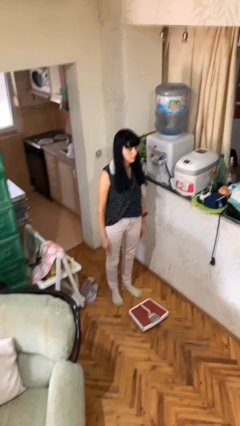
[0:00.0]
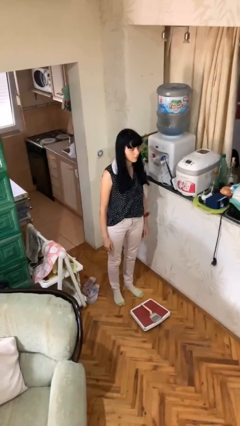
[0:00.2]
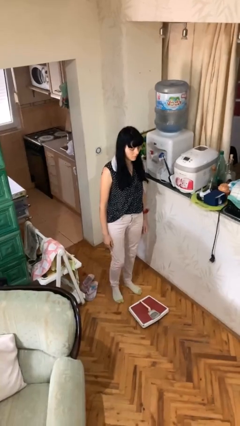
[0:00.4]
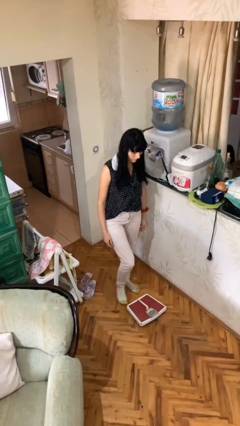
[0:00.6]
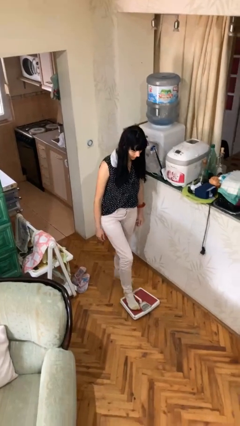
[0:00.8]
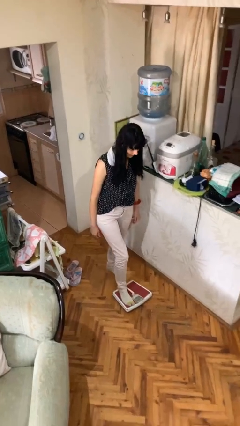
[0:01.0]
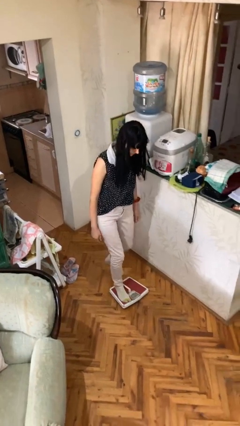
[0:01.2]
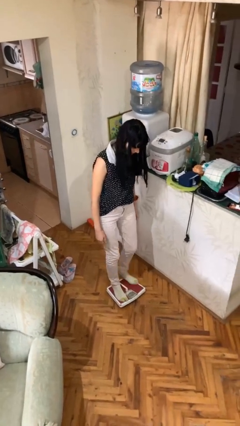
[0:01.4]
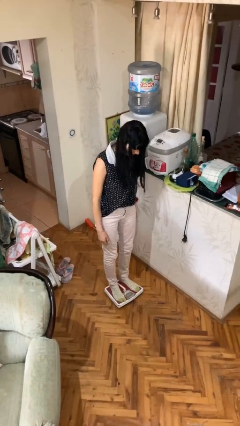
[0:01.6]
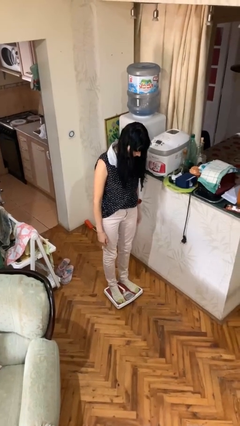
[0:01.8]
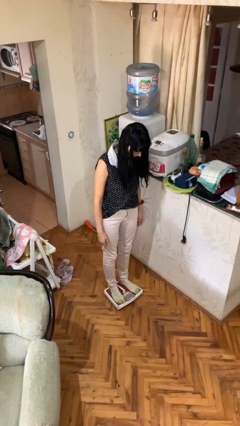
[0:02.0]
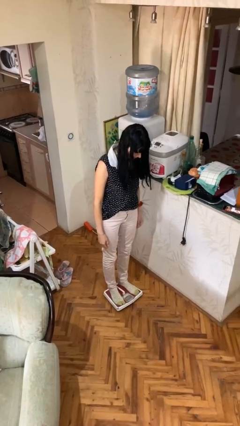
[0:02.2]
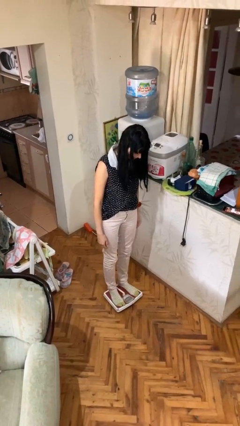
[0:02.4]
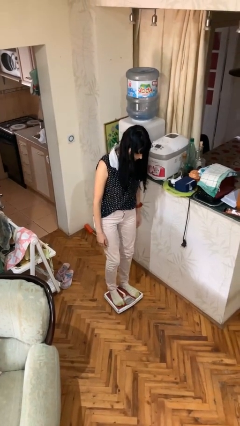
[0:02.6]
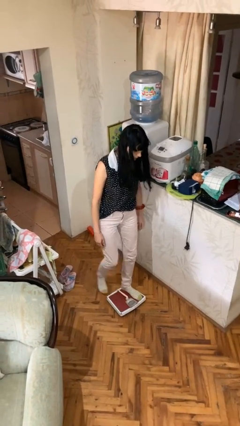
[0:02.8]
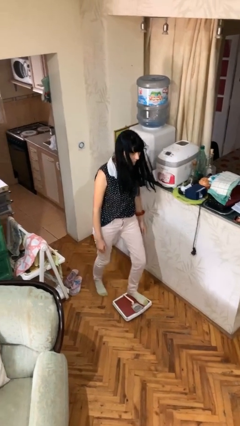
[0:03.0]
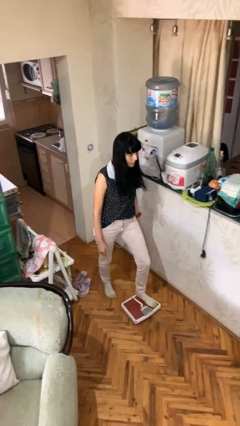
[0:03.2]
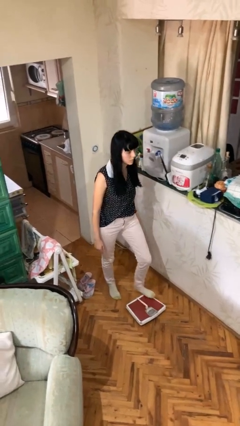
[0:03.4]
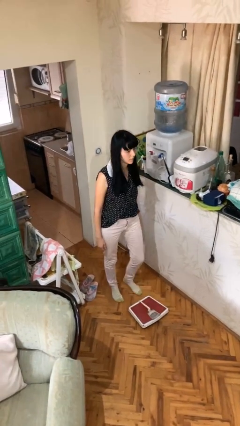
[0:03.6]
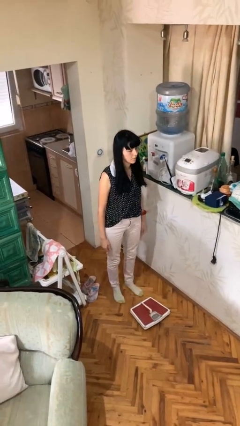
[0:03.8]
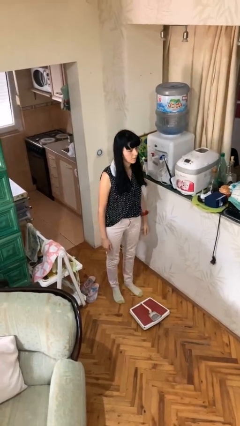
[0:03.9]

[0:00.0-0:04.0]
person uses bodyweight scale

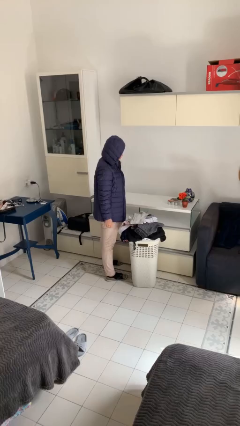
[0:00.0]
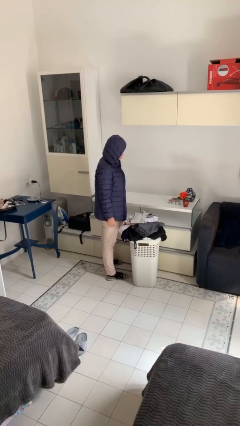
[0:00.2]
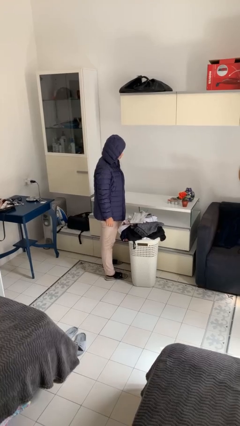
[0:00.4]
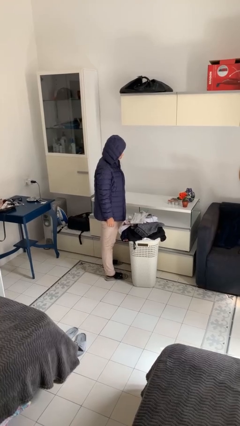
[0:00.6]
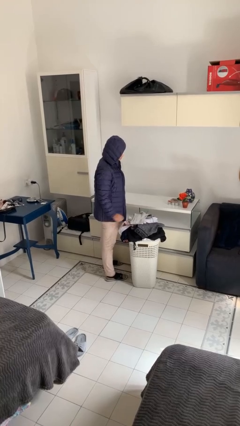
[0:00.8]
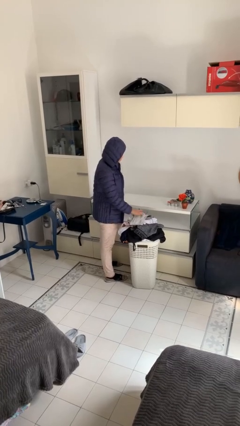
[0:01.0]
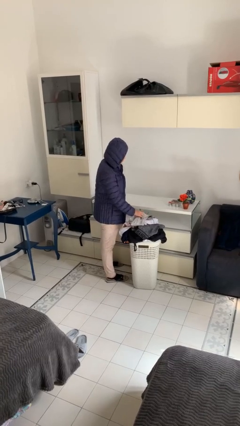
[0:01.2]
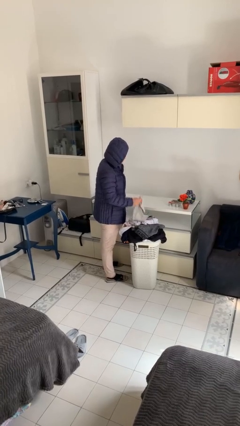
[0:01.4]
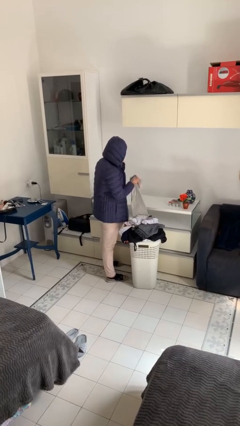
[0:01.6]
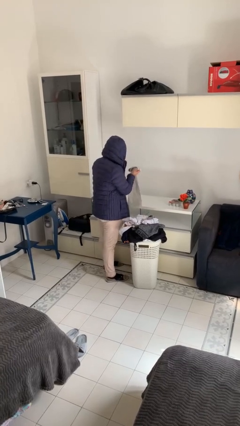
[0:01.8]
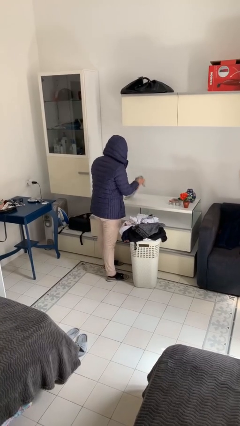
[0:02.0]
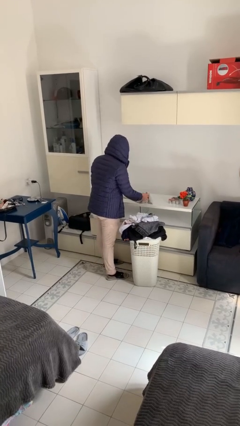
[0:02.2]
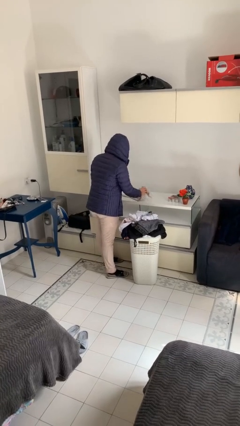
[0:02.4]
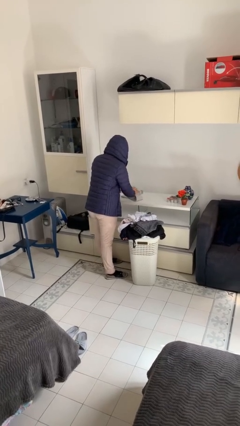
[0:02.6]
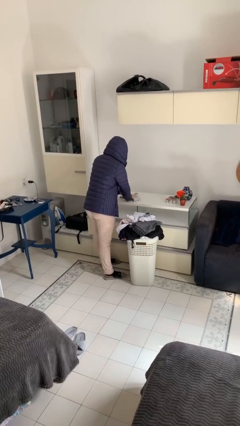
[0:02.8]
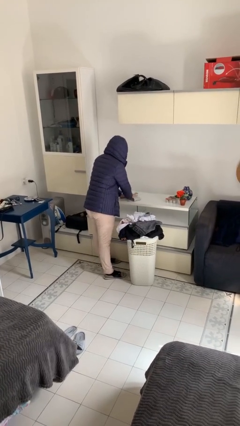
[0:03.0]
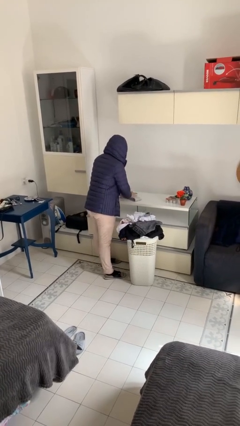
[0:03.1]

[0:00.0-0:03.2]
person folds shirt

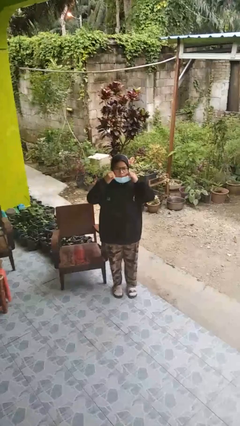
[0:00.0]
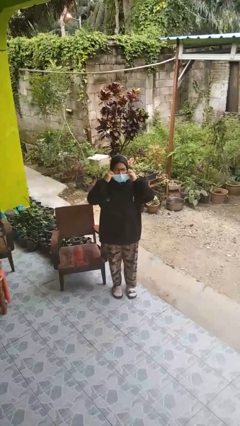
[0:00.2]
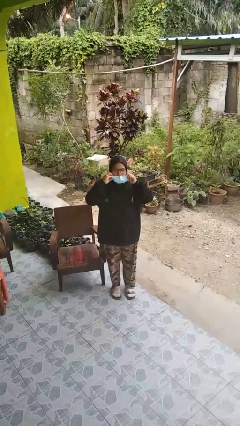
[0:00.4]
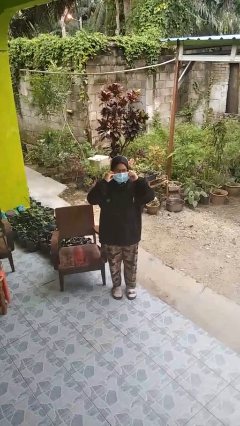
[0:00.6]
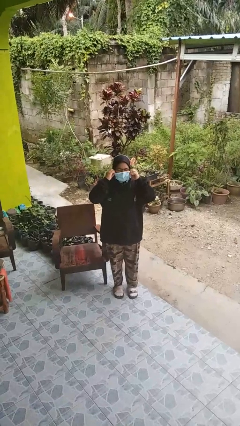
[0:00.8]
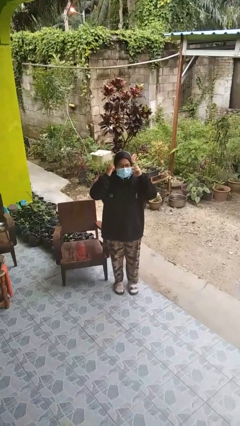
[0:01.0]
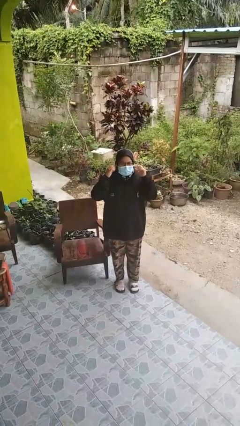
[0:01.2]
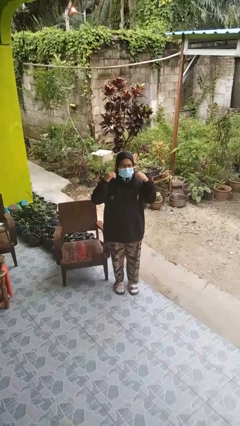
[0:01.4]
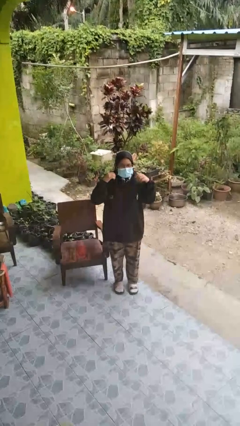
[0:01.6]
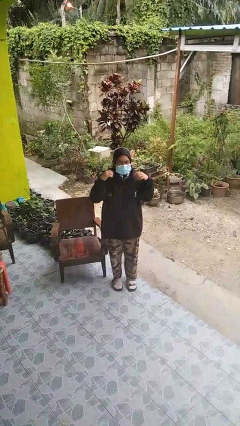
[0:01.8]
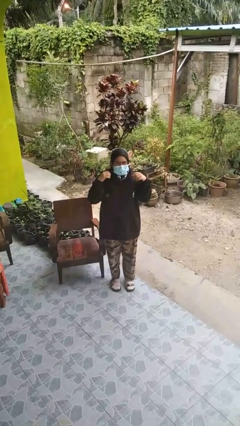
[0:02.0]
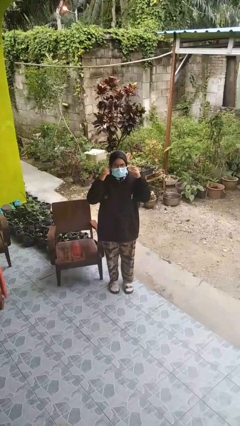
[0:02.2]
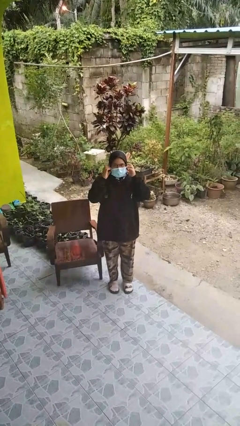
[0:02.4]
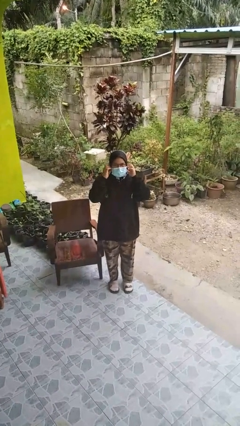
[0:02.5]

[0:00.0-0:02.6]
person puts on facemask

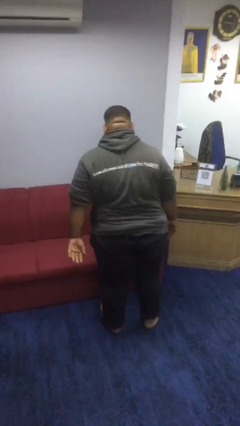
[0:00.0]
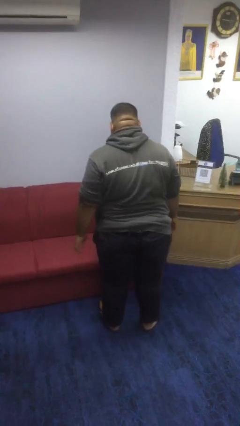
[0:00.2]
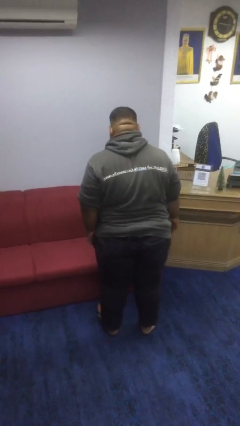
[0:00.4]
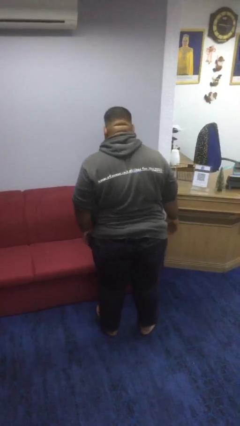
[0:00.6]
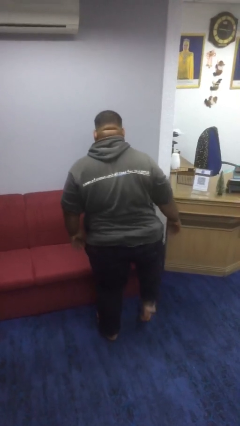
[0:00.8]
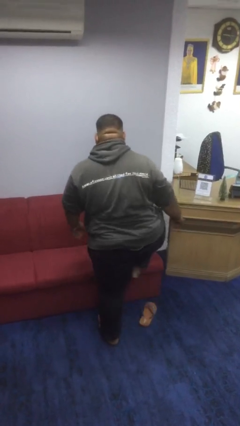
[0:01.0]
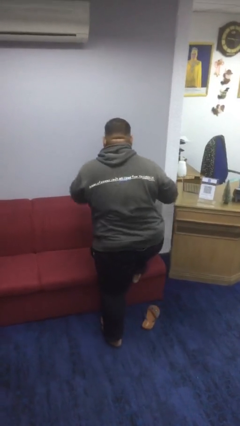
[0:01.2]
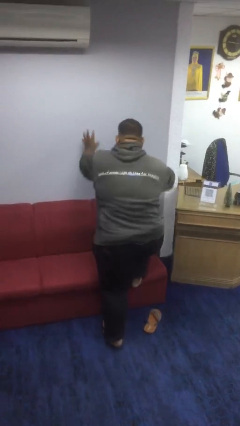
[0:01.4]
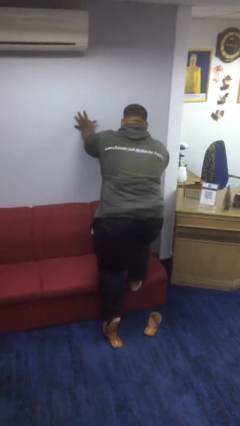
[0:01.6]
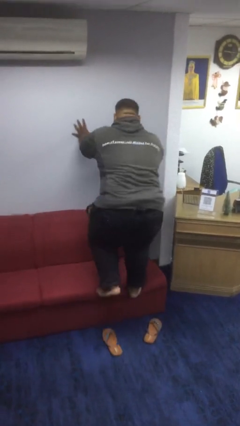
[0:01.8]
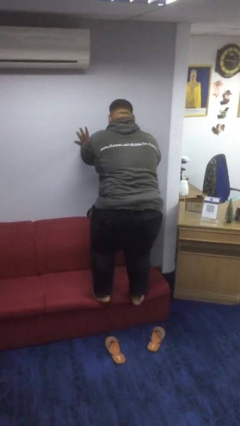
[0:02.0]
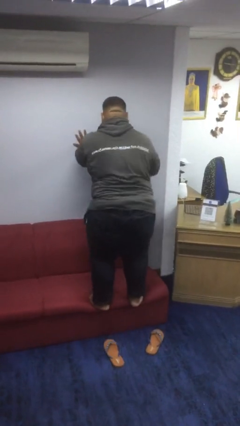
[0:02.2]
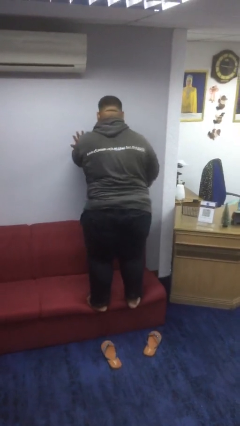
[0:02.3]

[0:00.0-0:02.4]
person climbs on couch

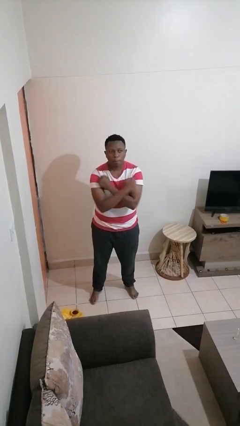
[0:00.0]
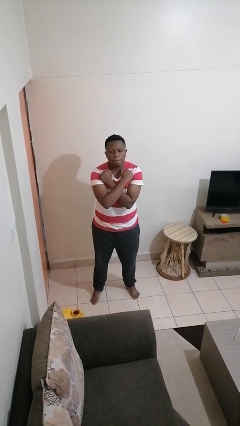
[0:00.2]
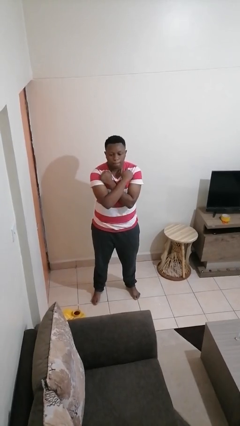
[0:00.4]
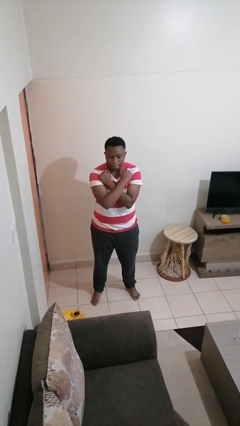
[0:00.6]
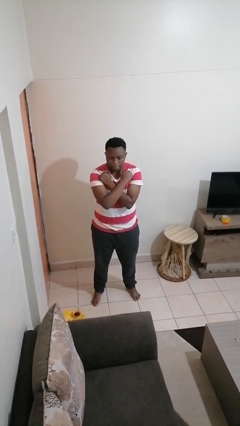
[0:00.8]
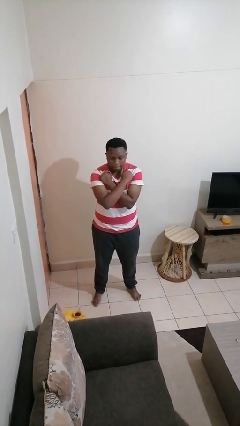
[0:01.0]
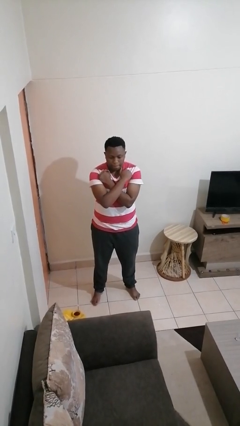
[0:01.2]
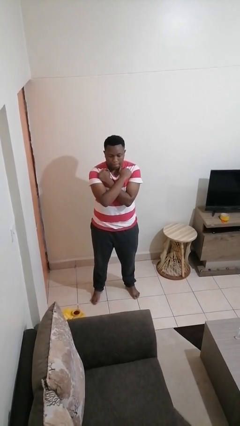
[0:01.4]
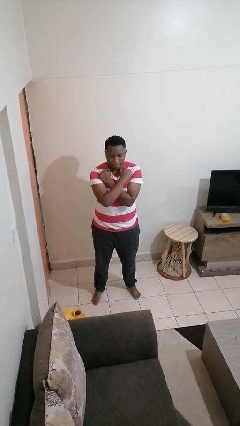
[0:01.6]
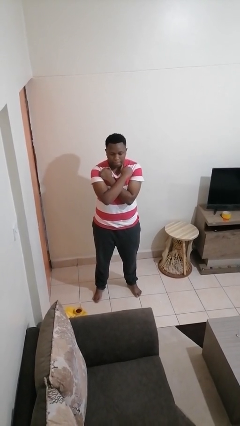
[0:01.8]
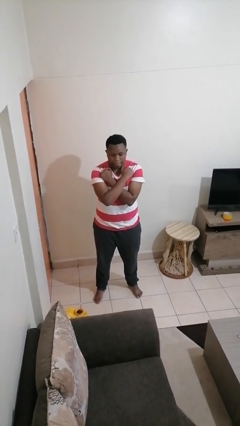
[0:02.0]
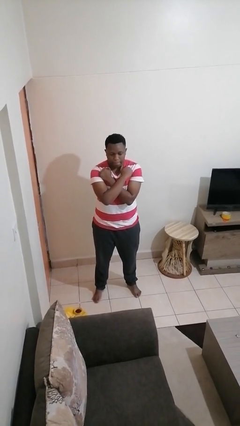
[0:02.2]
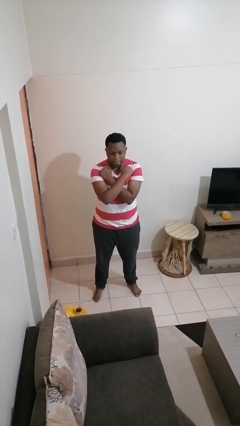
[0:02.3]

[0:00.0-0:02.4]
person gestures arms x

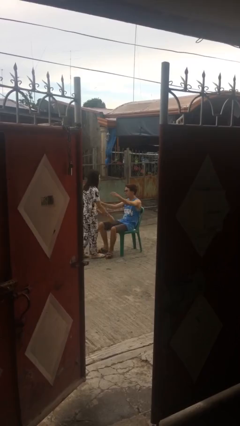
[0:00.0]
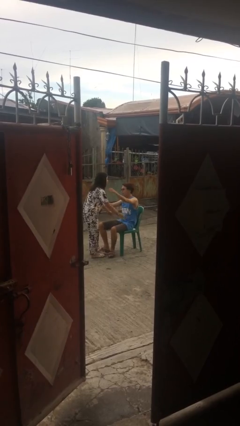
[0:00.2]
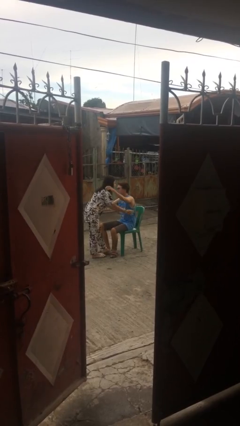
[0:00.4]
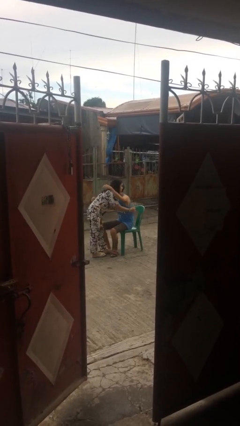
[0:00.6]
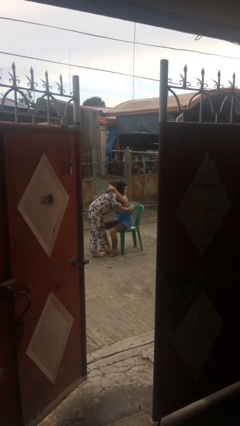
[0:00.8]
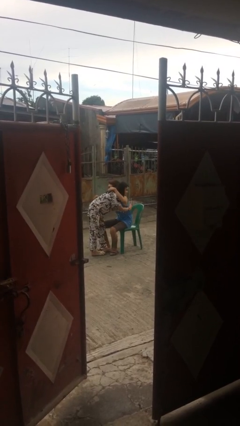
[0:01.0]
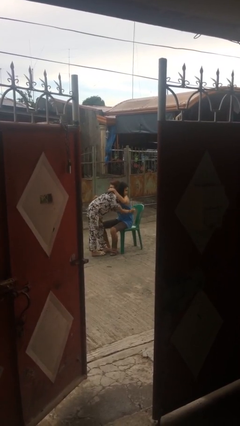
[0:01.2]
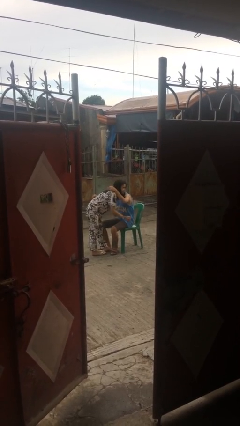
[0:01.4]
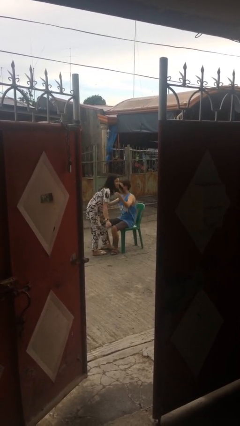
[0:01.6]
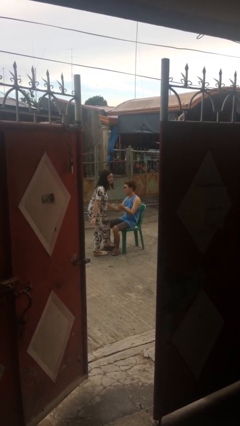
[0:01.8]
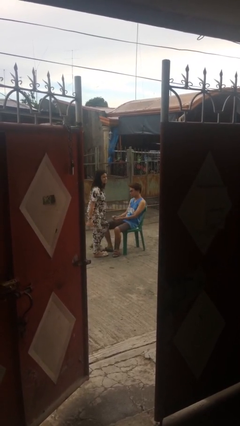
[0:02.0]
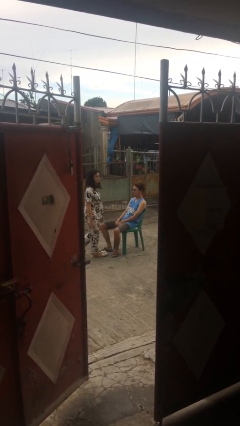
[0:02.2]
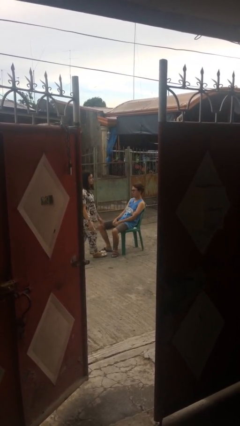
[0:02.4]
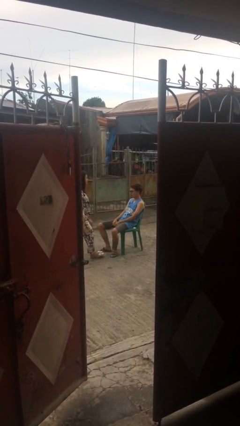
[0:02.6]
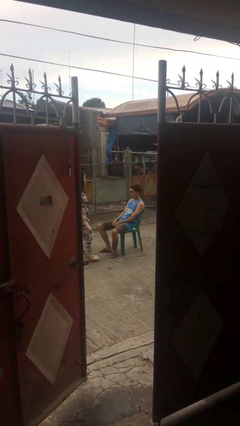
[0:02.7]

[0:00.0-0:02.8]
person embraces person
